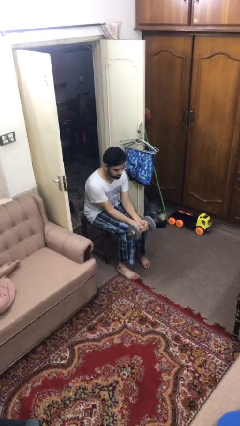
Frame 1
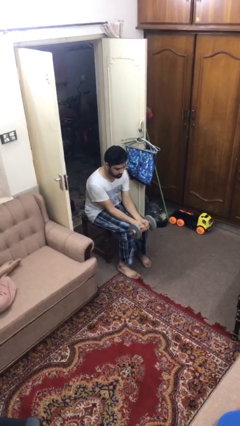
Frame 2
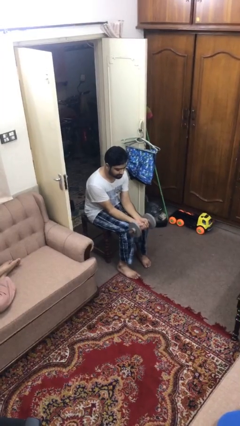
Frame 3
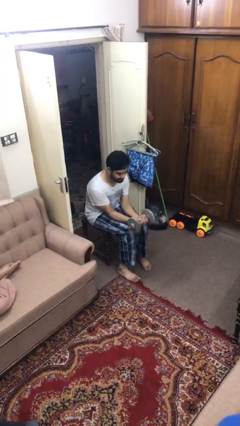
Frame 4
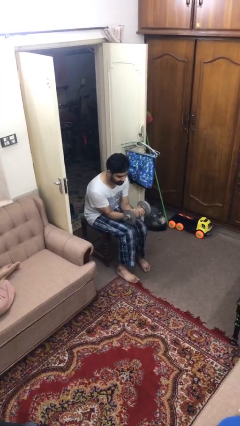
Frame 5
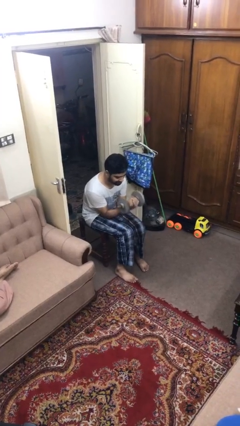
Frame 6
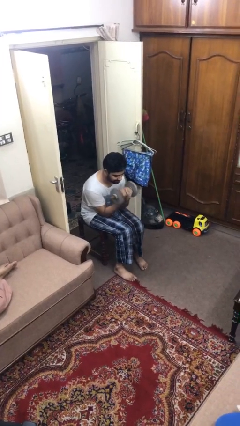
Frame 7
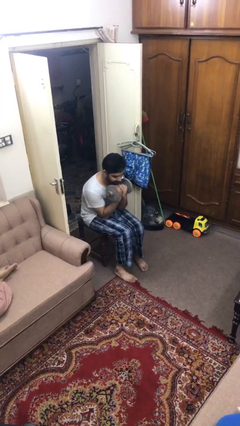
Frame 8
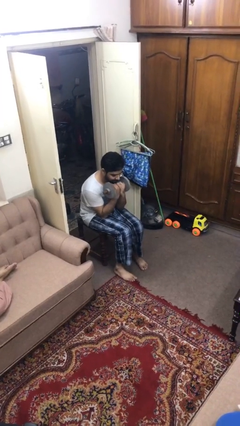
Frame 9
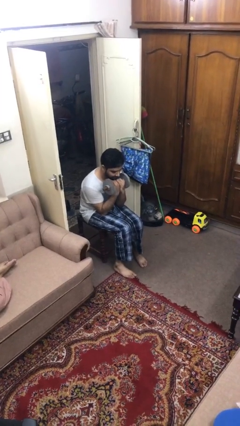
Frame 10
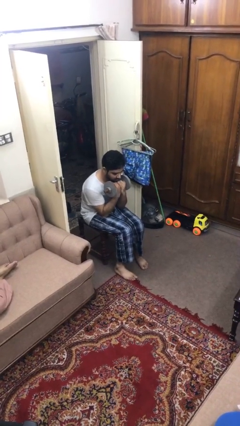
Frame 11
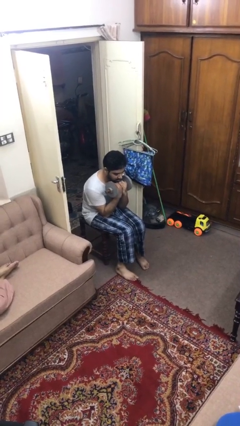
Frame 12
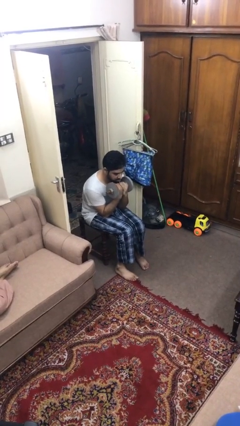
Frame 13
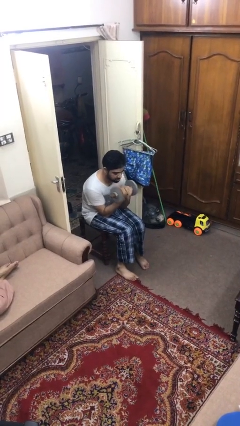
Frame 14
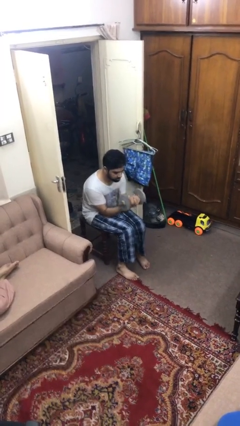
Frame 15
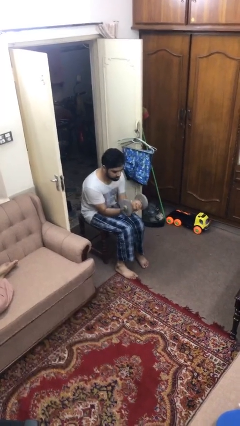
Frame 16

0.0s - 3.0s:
person lifts dumbbells

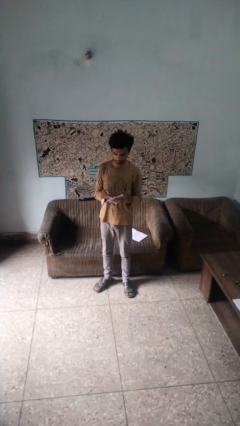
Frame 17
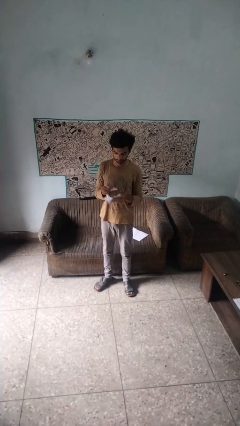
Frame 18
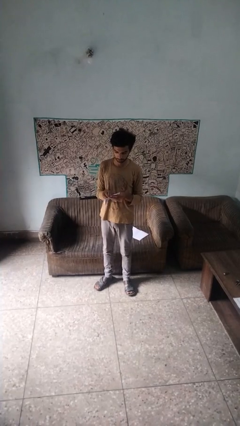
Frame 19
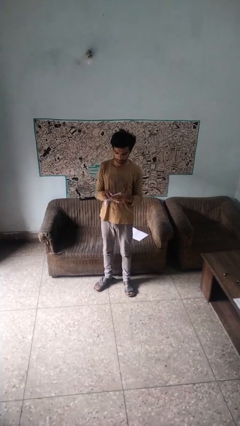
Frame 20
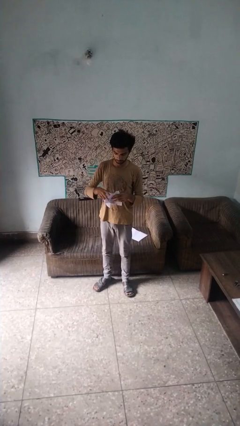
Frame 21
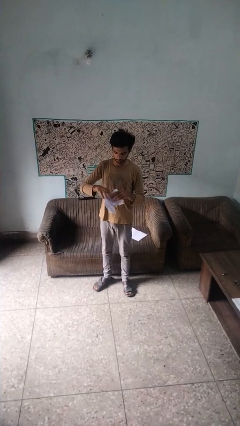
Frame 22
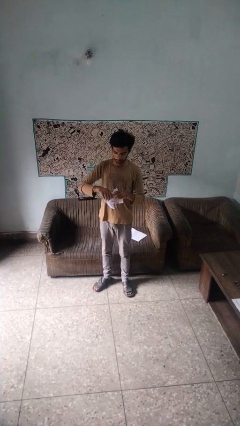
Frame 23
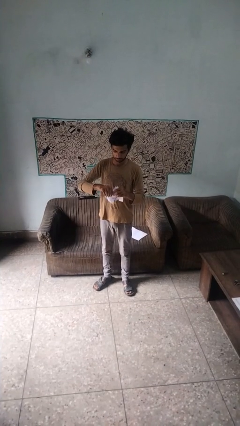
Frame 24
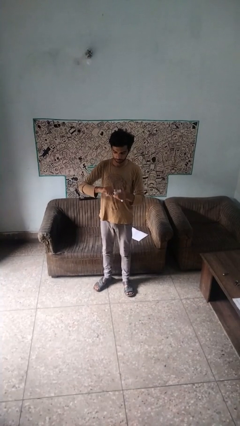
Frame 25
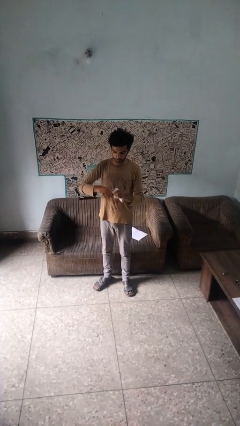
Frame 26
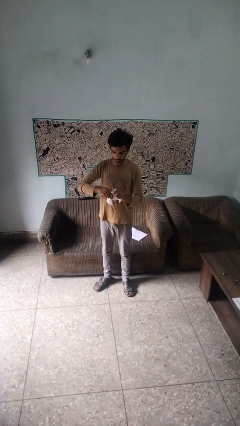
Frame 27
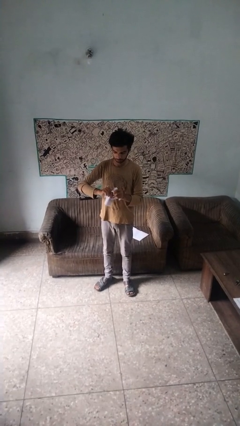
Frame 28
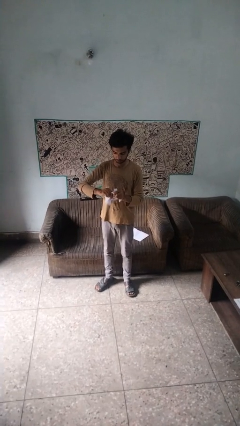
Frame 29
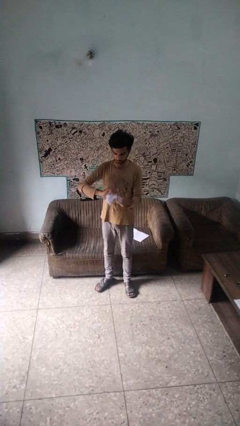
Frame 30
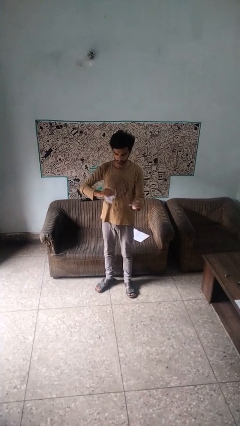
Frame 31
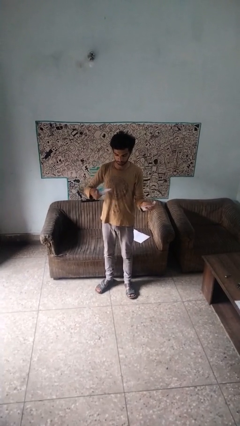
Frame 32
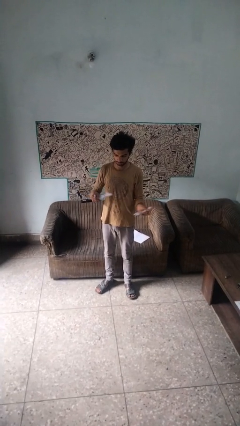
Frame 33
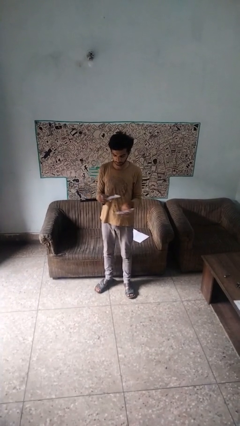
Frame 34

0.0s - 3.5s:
person tears paper

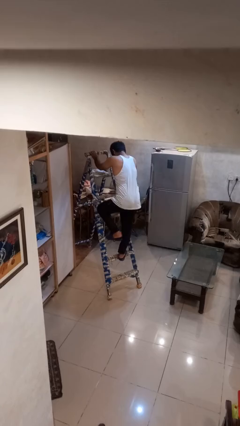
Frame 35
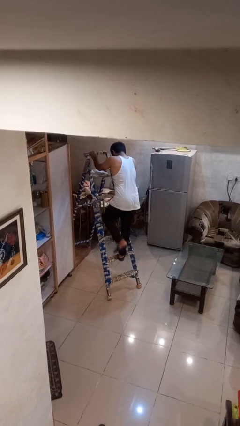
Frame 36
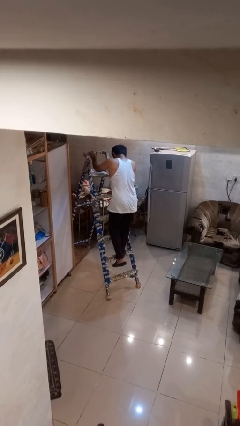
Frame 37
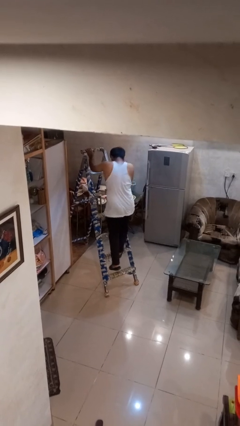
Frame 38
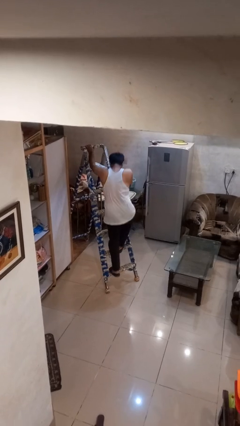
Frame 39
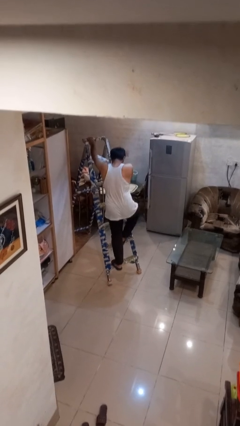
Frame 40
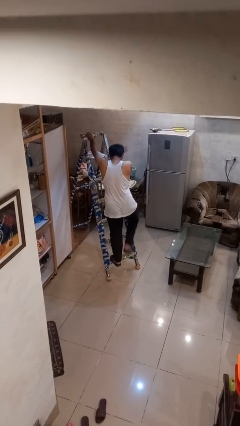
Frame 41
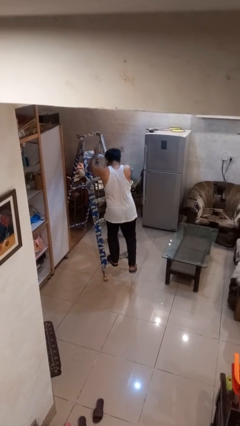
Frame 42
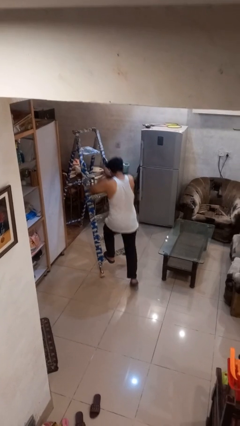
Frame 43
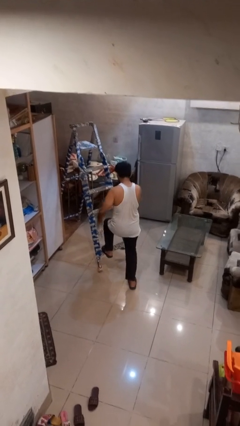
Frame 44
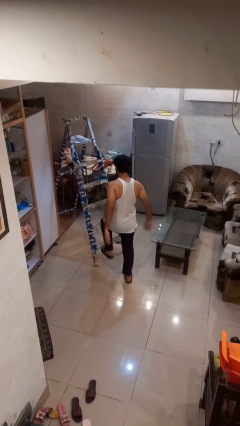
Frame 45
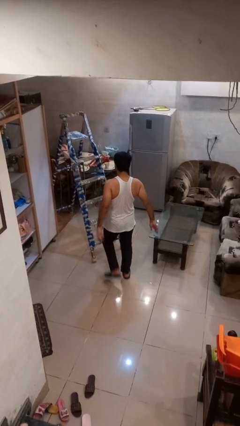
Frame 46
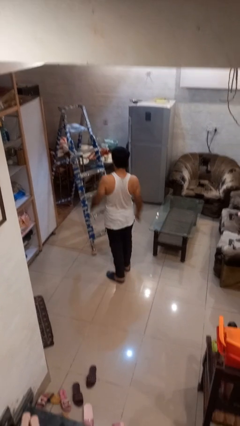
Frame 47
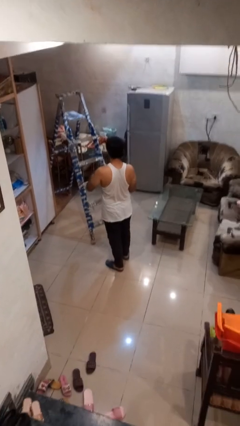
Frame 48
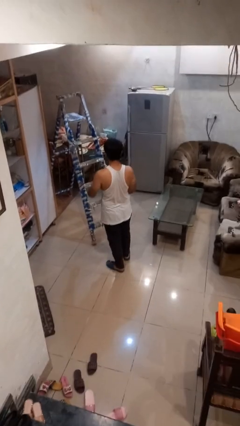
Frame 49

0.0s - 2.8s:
person climbs down ladder

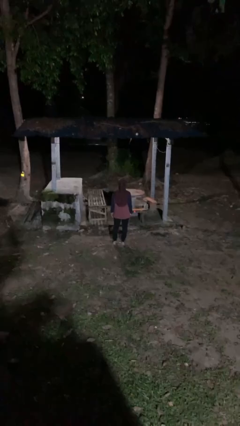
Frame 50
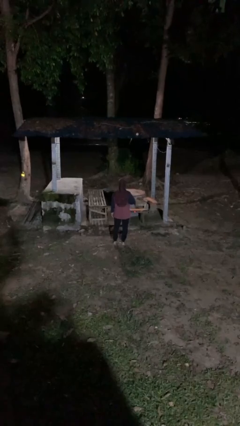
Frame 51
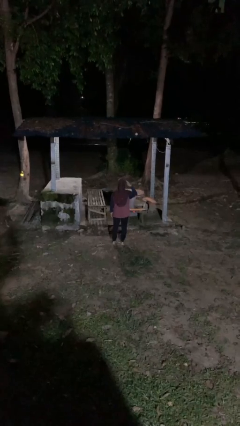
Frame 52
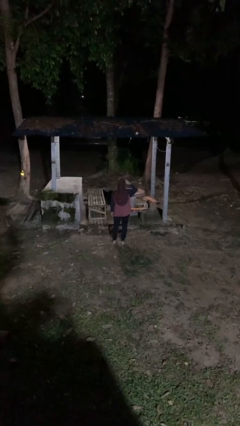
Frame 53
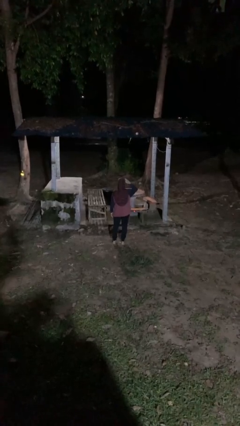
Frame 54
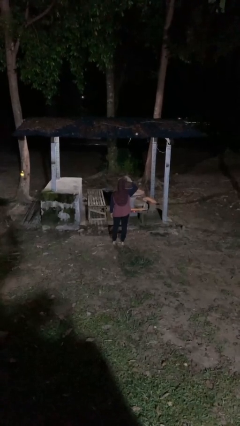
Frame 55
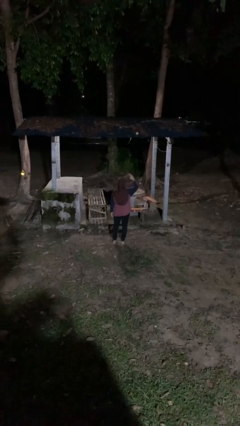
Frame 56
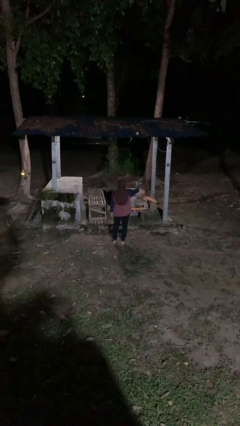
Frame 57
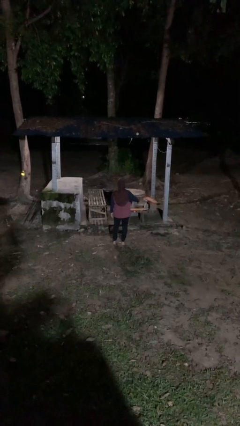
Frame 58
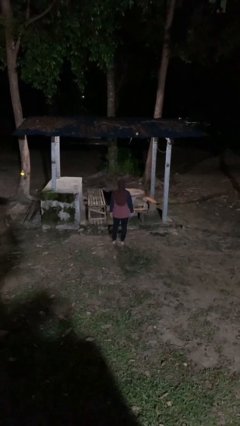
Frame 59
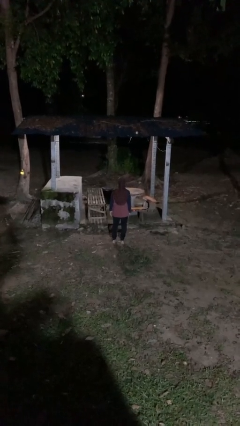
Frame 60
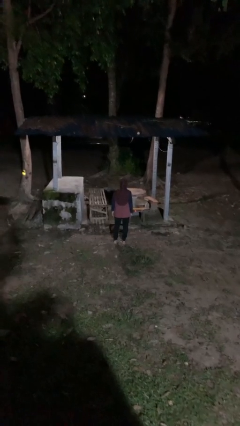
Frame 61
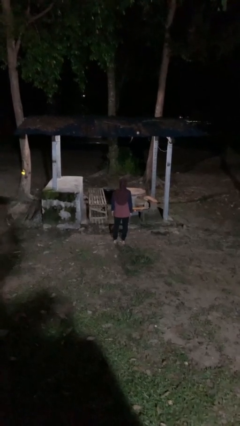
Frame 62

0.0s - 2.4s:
person salutes

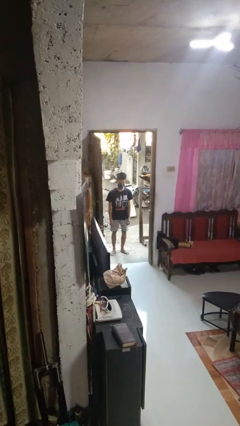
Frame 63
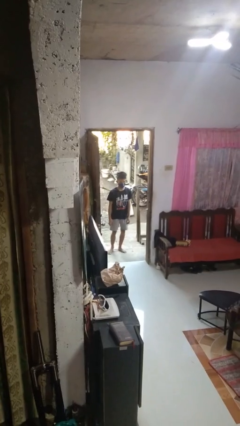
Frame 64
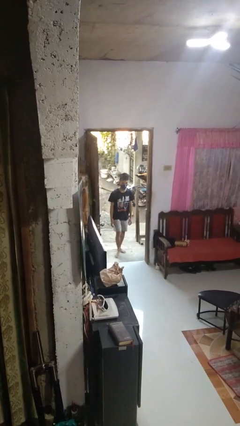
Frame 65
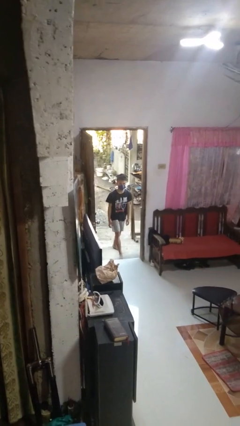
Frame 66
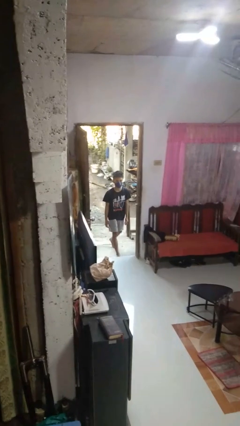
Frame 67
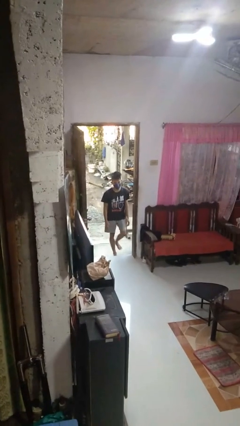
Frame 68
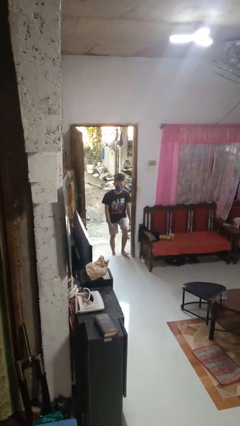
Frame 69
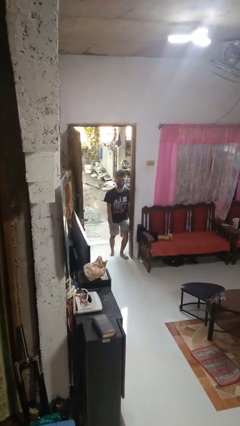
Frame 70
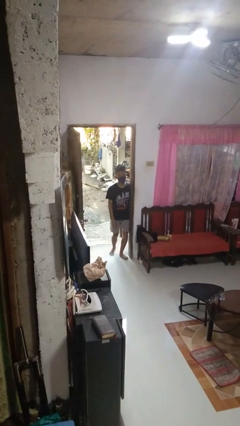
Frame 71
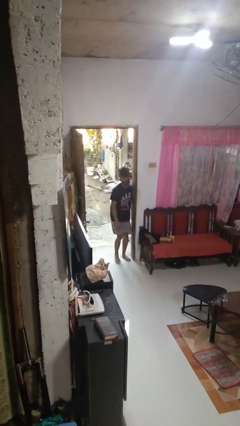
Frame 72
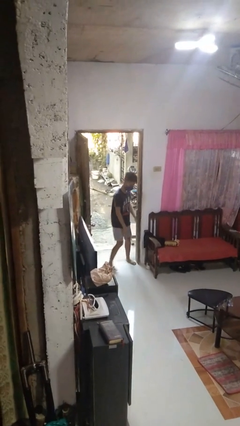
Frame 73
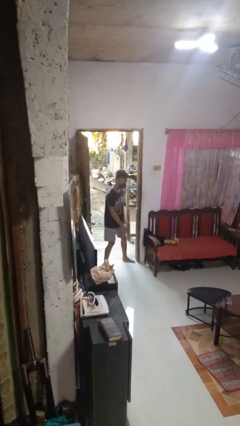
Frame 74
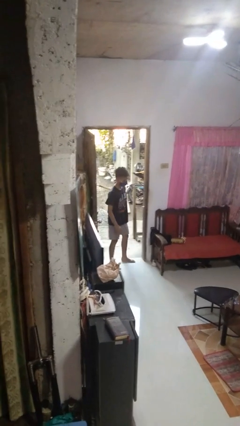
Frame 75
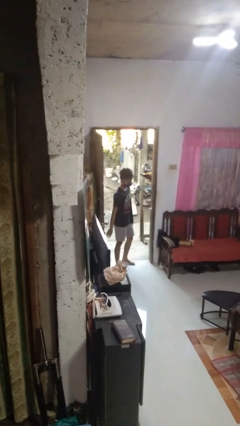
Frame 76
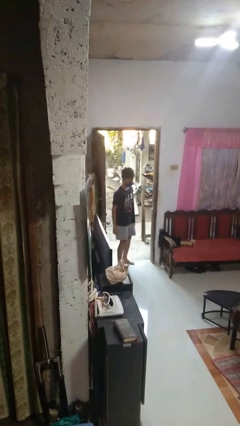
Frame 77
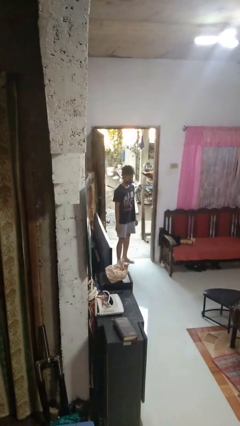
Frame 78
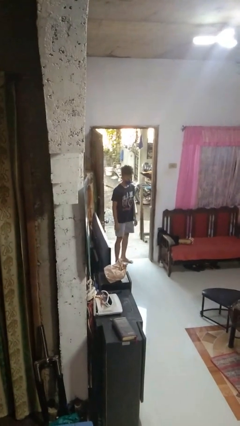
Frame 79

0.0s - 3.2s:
person bumps into wall

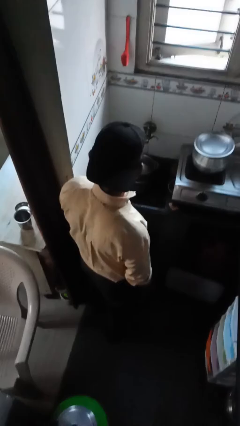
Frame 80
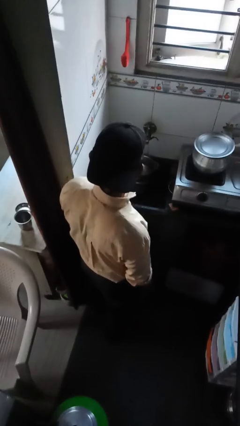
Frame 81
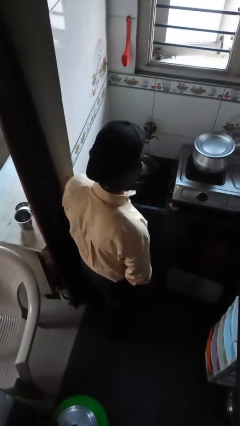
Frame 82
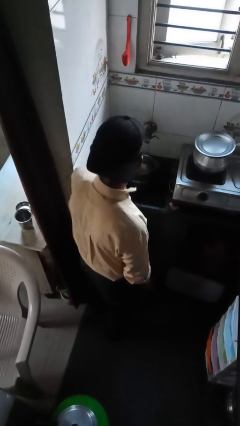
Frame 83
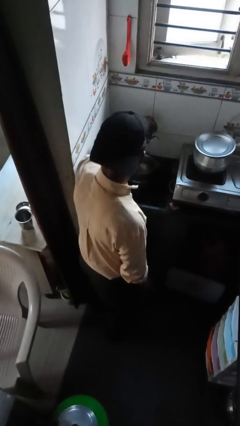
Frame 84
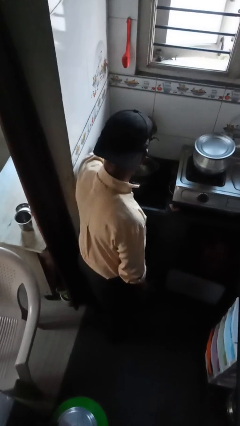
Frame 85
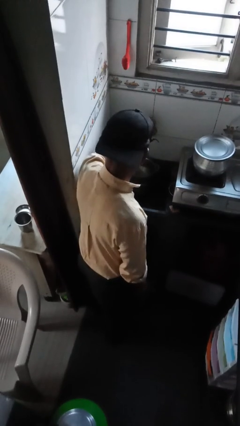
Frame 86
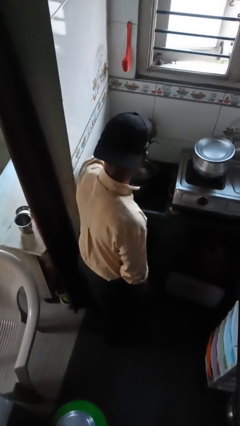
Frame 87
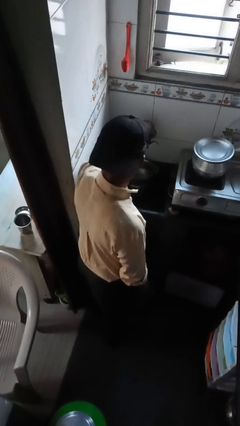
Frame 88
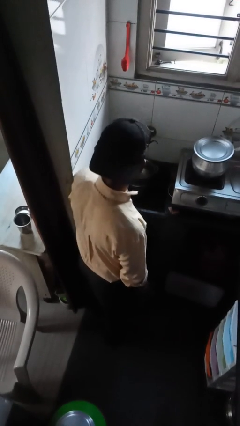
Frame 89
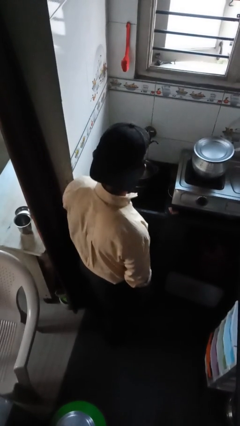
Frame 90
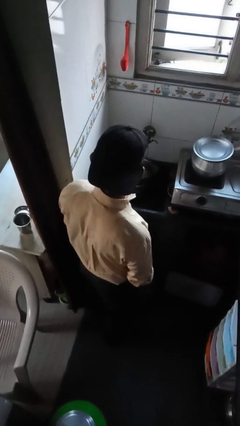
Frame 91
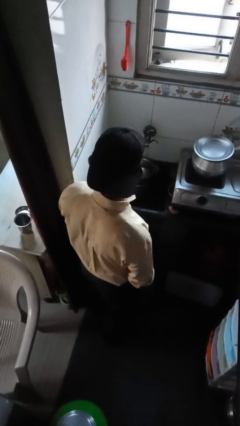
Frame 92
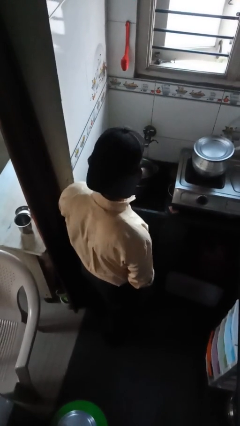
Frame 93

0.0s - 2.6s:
person turns on faucet
